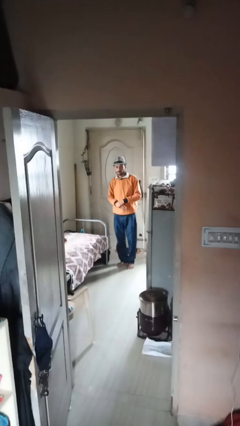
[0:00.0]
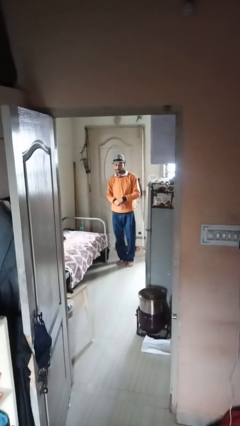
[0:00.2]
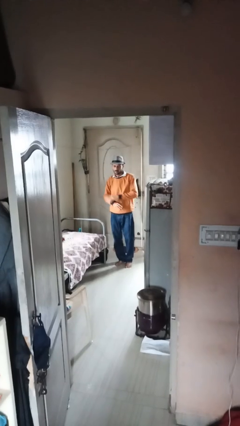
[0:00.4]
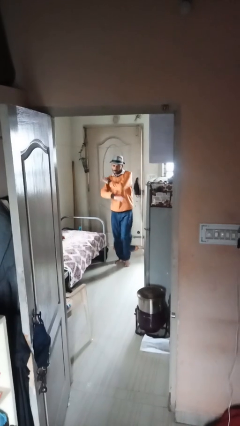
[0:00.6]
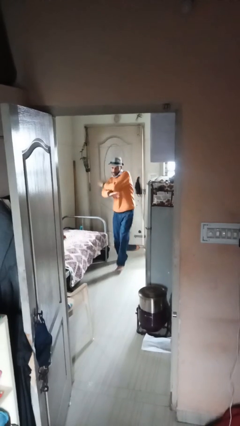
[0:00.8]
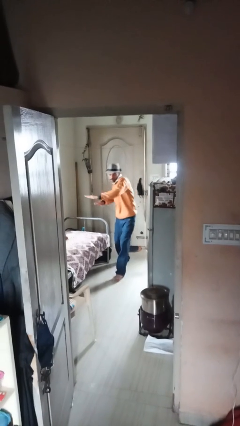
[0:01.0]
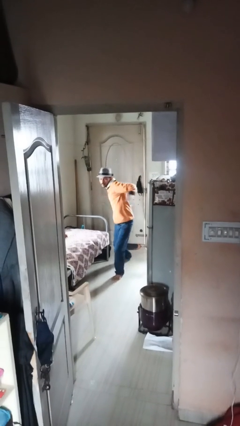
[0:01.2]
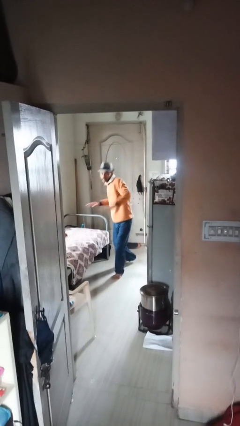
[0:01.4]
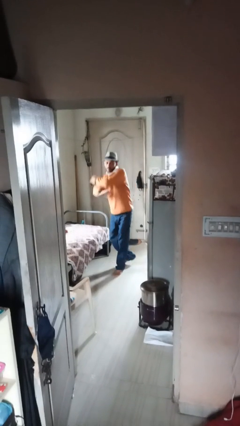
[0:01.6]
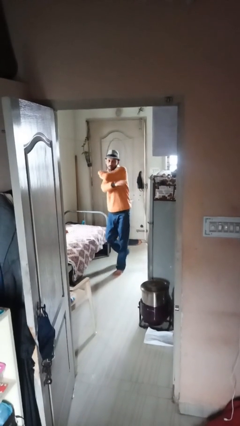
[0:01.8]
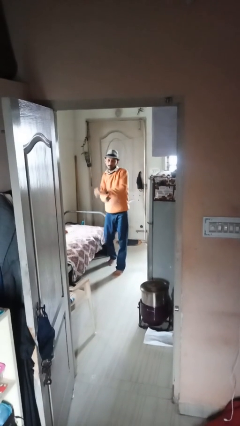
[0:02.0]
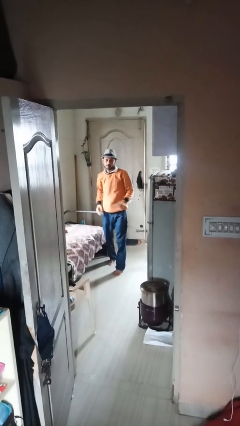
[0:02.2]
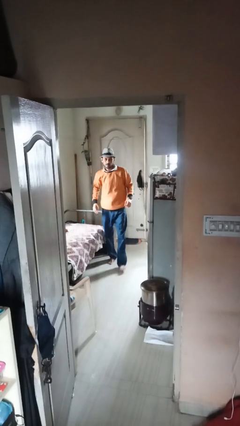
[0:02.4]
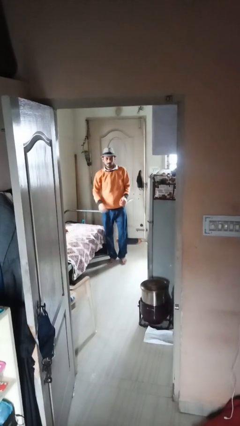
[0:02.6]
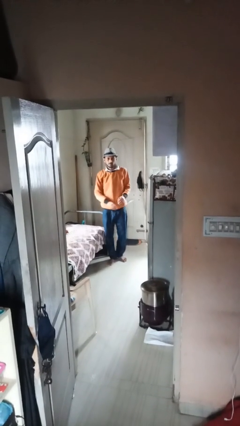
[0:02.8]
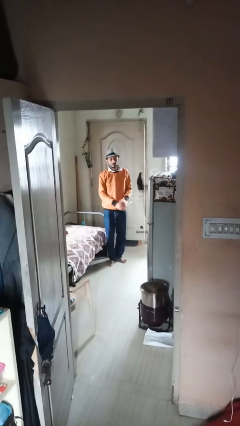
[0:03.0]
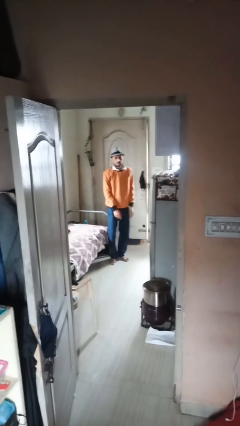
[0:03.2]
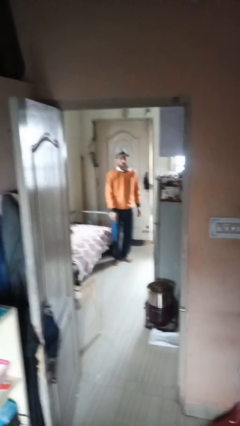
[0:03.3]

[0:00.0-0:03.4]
person karate chop

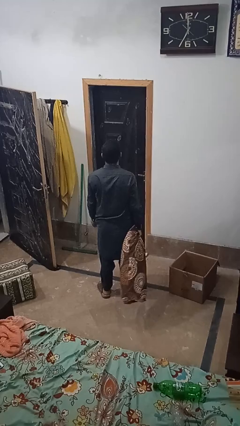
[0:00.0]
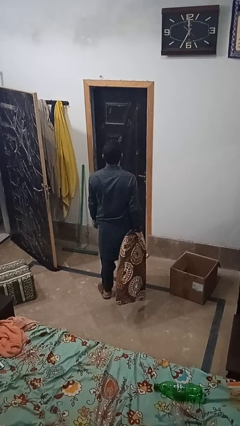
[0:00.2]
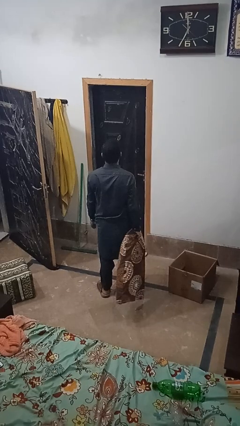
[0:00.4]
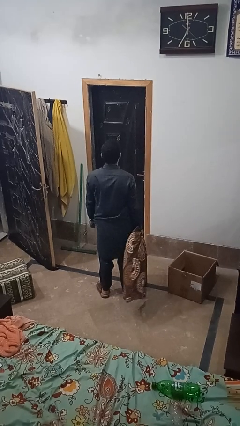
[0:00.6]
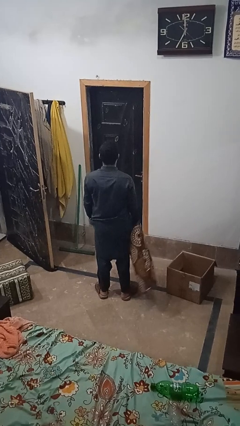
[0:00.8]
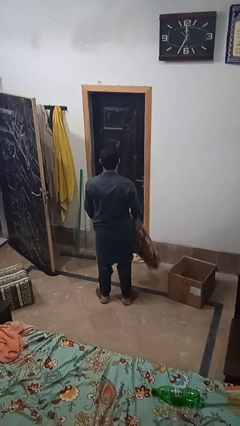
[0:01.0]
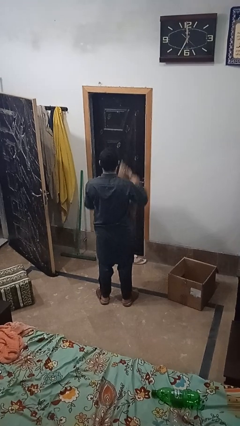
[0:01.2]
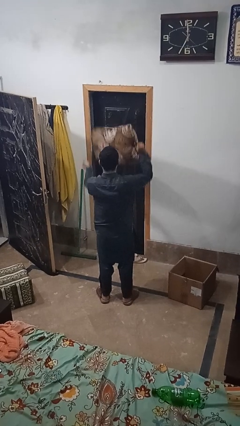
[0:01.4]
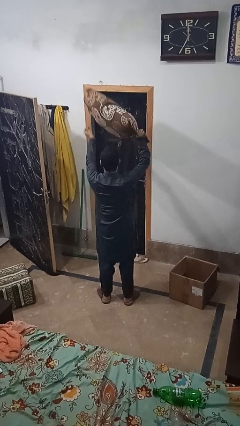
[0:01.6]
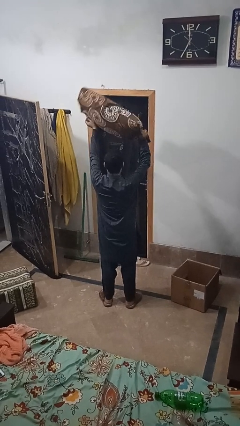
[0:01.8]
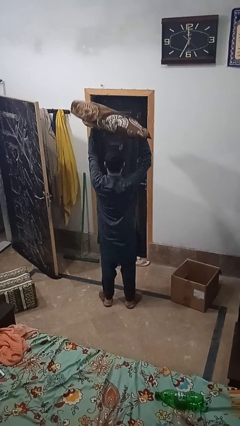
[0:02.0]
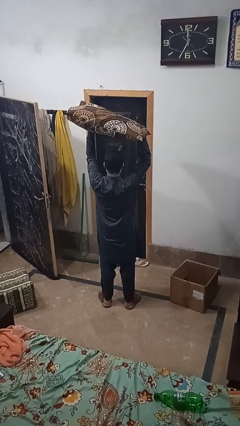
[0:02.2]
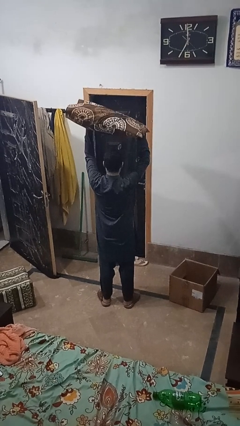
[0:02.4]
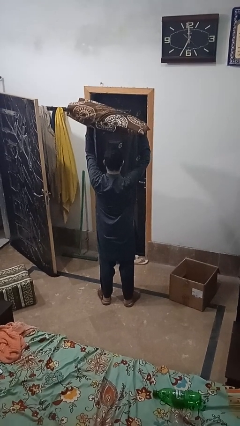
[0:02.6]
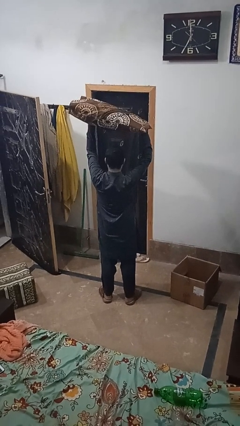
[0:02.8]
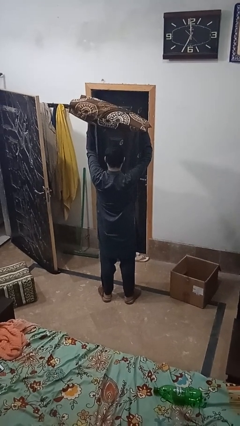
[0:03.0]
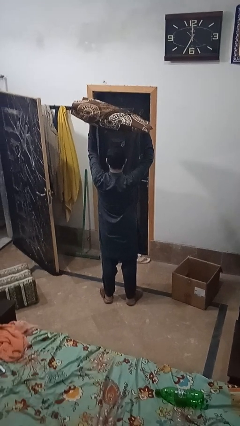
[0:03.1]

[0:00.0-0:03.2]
person holds object above head

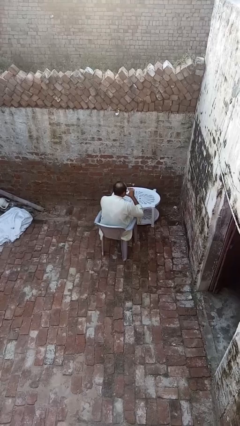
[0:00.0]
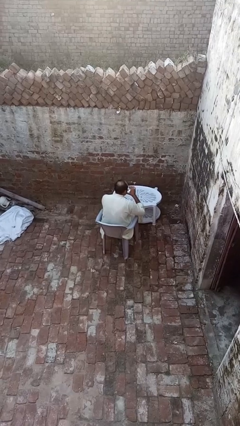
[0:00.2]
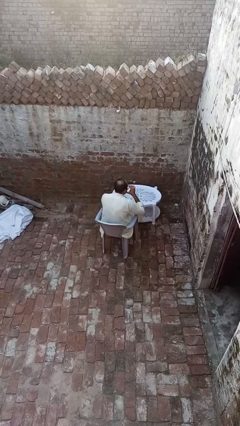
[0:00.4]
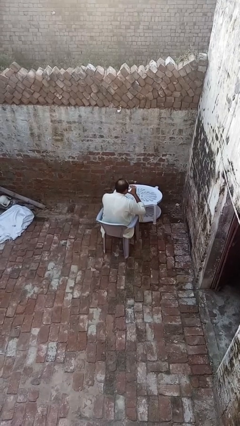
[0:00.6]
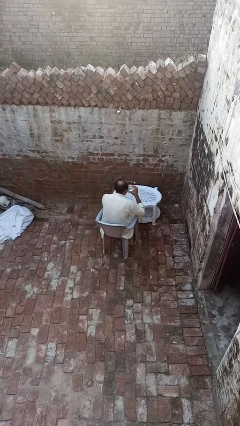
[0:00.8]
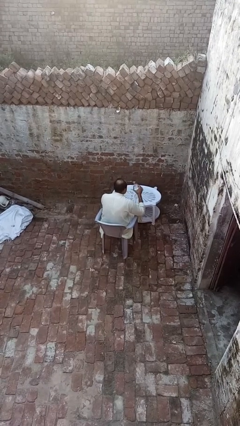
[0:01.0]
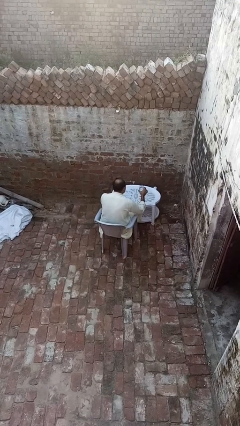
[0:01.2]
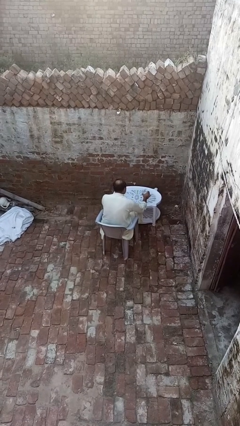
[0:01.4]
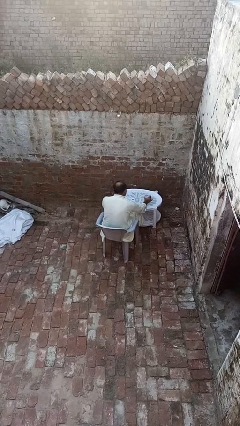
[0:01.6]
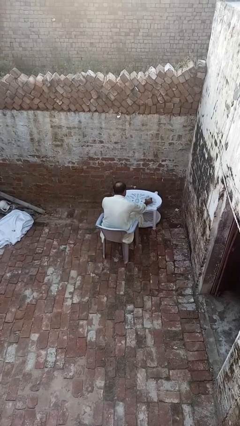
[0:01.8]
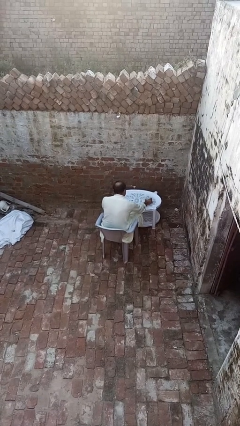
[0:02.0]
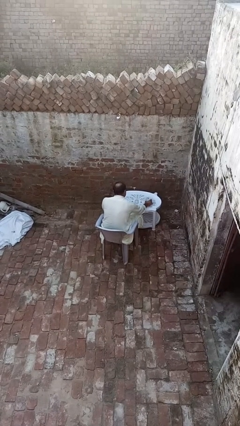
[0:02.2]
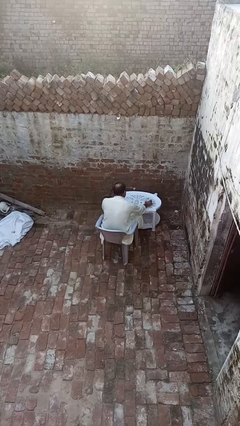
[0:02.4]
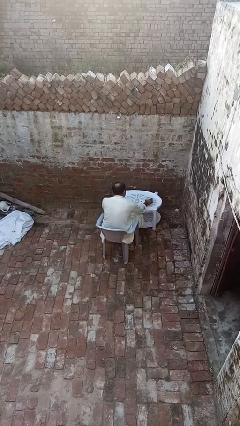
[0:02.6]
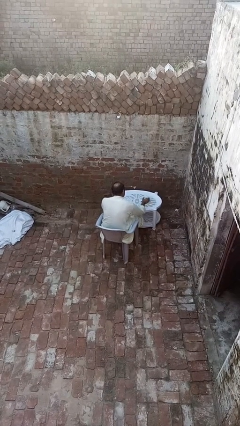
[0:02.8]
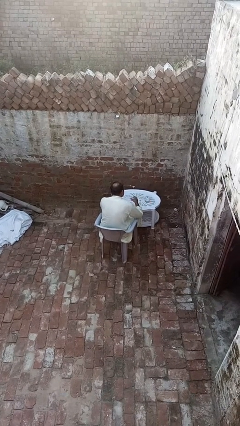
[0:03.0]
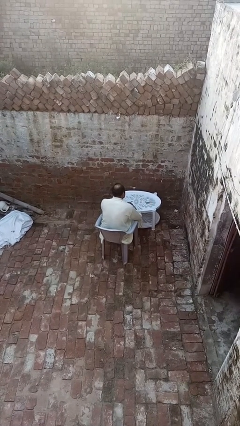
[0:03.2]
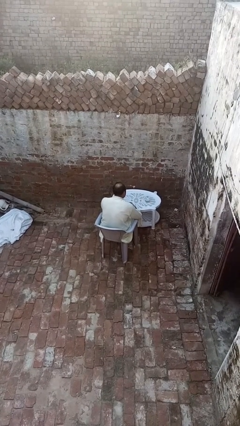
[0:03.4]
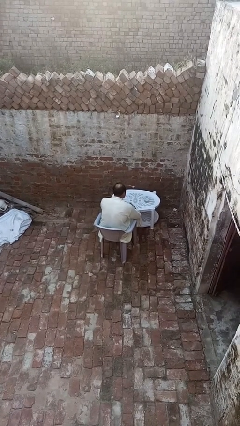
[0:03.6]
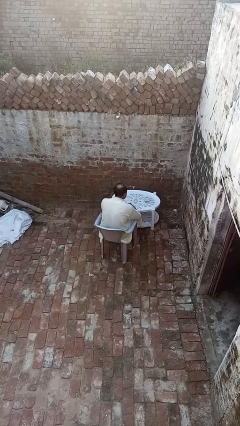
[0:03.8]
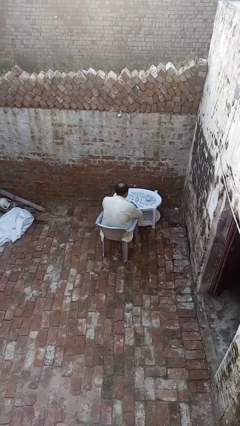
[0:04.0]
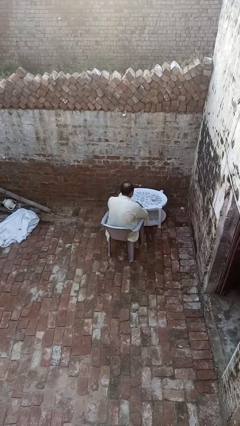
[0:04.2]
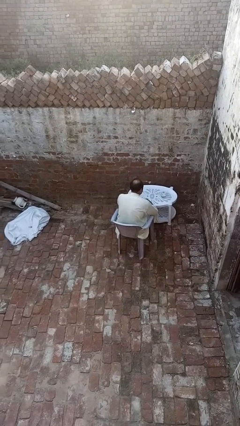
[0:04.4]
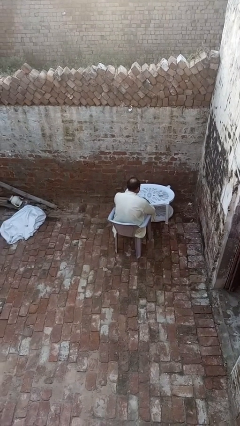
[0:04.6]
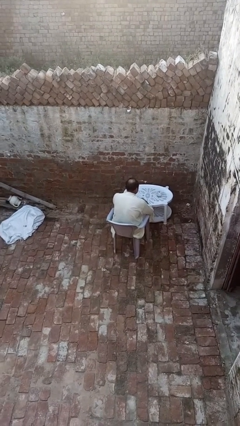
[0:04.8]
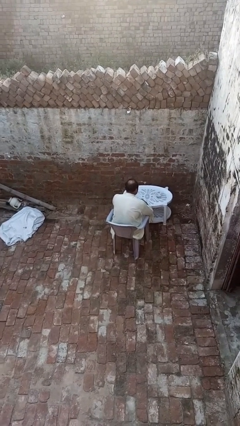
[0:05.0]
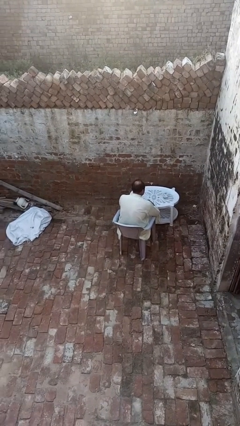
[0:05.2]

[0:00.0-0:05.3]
person puts down object on table

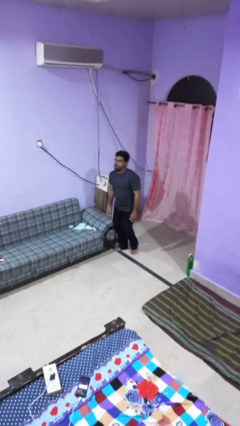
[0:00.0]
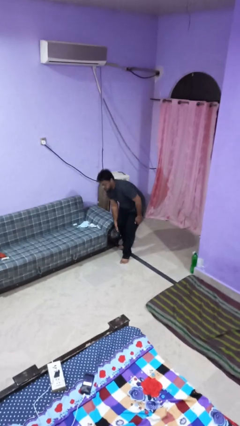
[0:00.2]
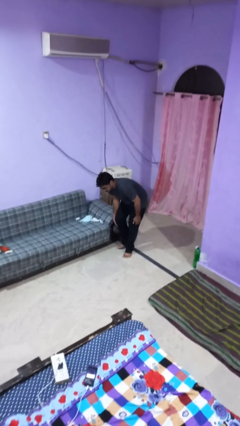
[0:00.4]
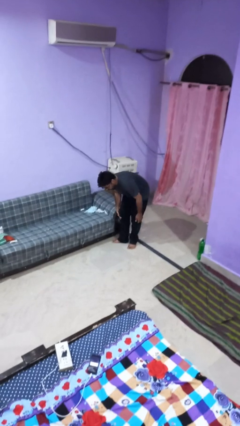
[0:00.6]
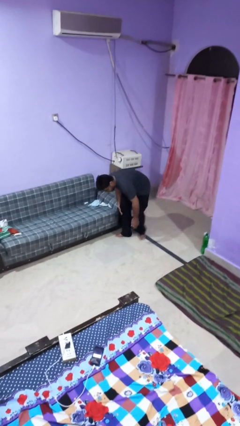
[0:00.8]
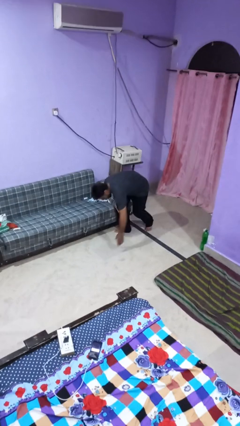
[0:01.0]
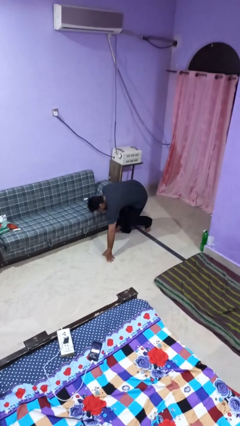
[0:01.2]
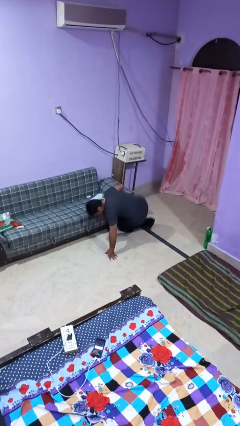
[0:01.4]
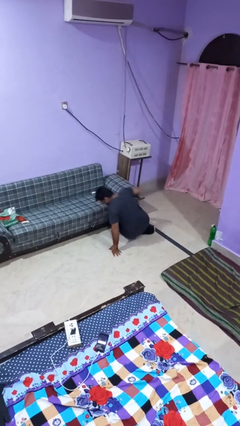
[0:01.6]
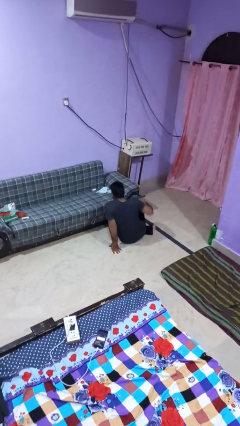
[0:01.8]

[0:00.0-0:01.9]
person trips on object on floor

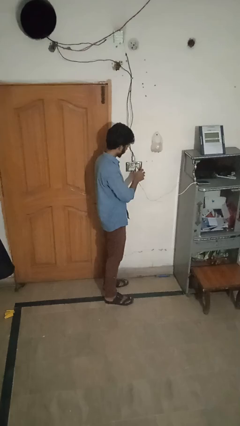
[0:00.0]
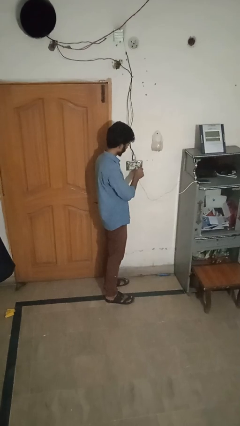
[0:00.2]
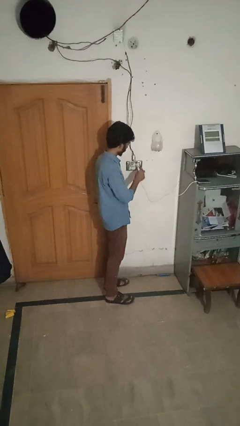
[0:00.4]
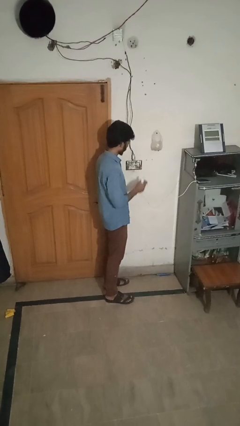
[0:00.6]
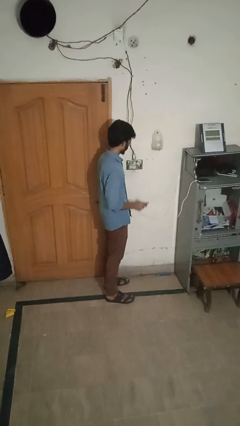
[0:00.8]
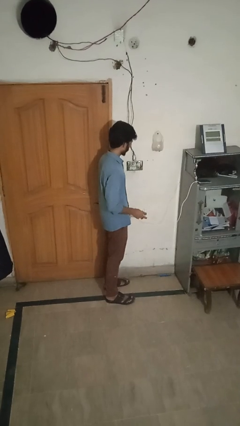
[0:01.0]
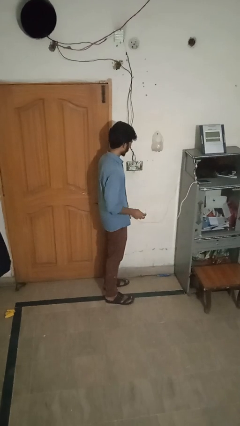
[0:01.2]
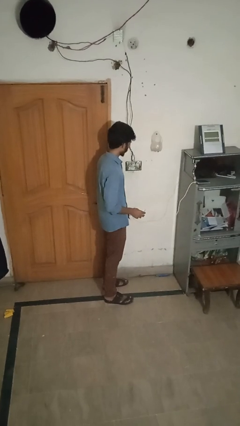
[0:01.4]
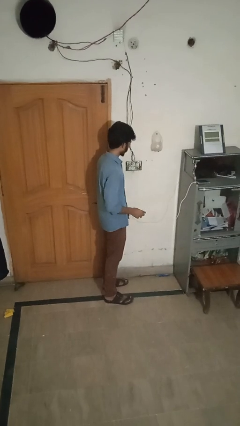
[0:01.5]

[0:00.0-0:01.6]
person unplugs from electrical socket

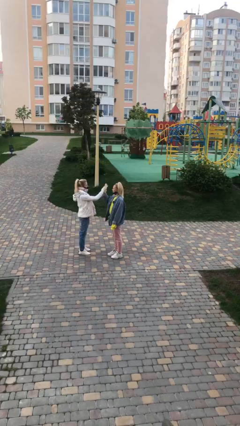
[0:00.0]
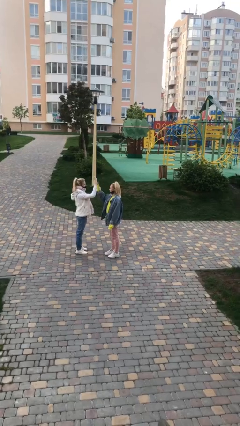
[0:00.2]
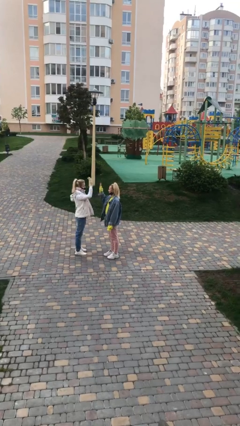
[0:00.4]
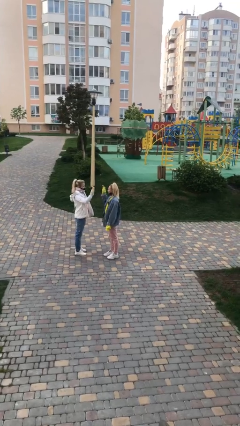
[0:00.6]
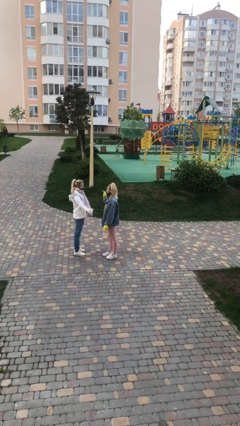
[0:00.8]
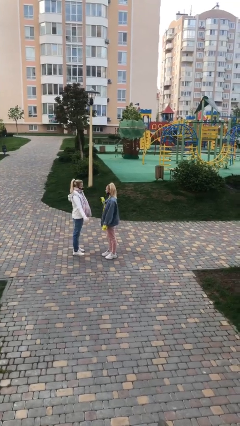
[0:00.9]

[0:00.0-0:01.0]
person highfives hand

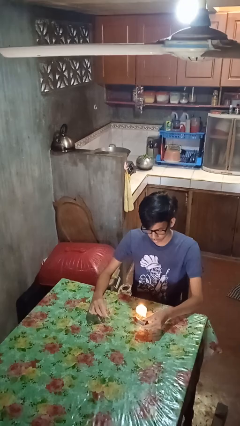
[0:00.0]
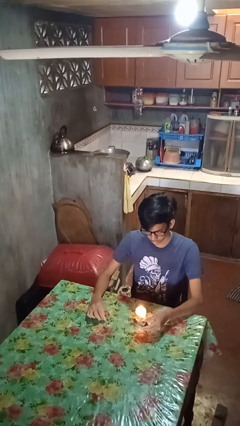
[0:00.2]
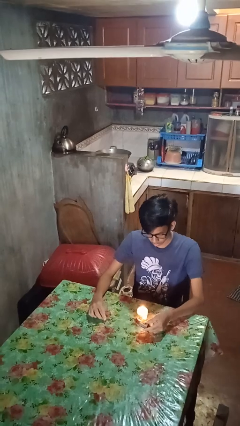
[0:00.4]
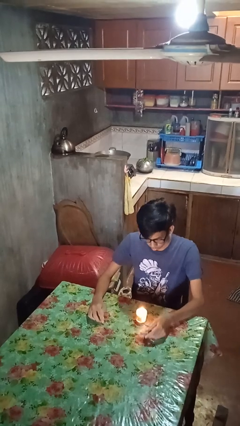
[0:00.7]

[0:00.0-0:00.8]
person extinguishes candle

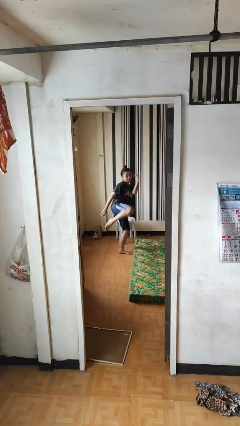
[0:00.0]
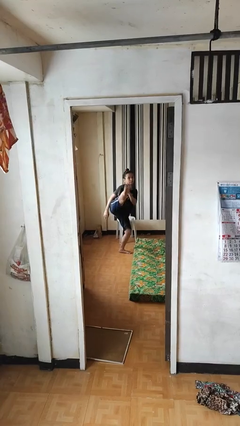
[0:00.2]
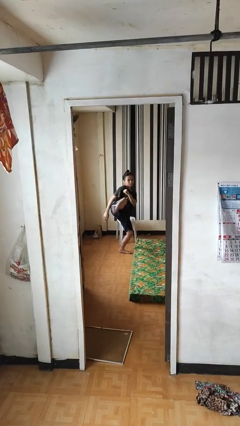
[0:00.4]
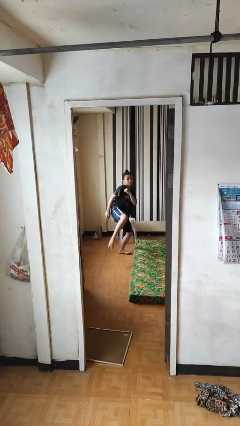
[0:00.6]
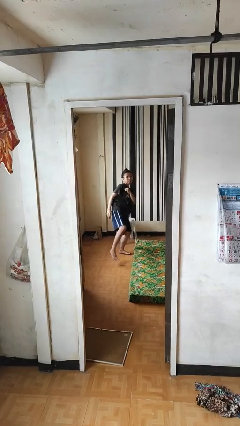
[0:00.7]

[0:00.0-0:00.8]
person karate kicks
